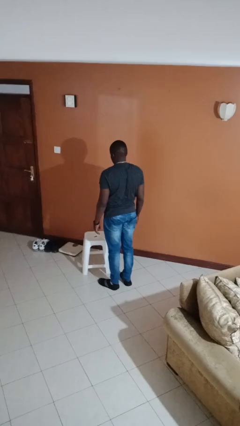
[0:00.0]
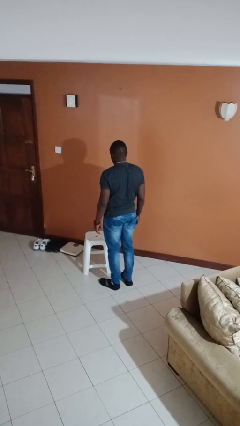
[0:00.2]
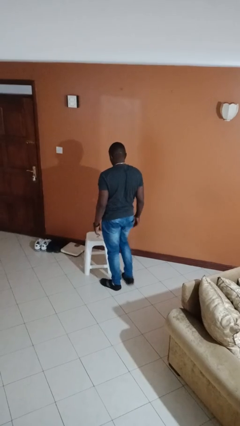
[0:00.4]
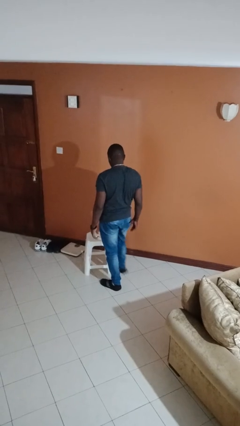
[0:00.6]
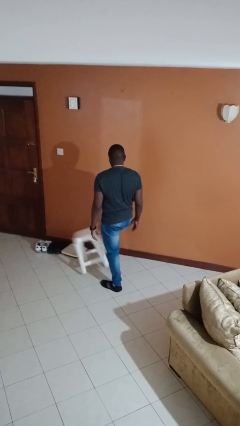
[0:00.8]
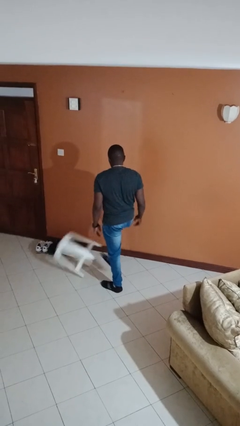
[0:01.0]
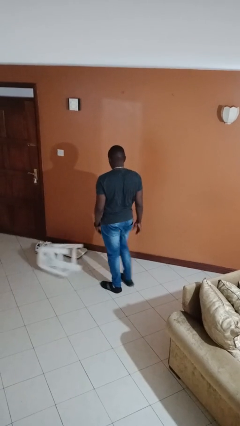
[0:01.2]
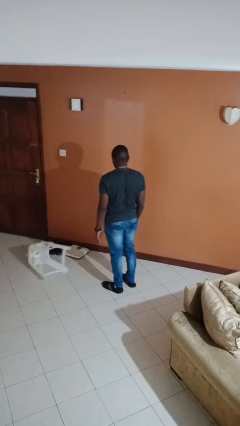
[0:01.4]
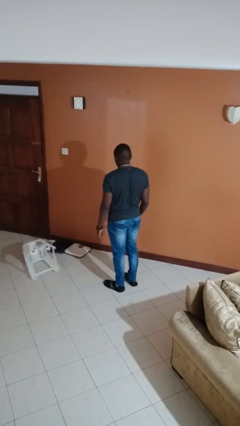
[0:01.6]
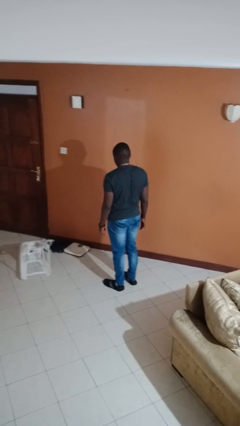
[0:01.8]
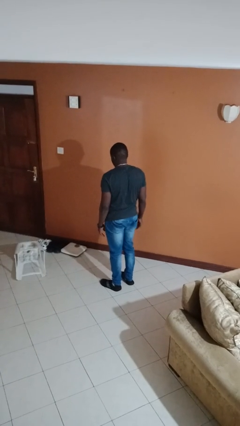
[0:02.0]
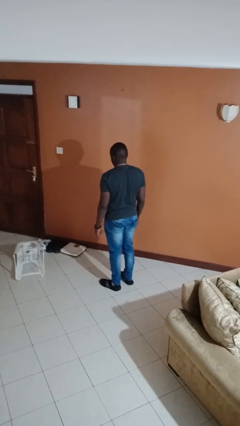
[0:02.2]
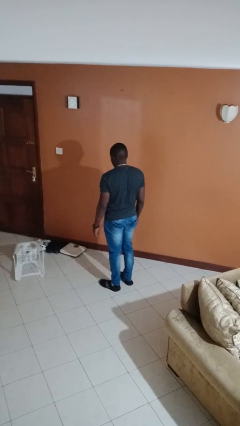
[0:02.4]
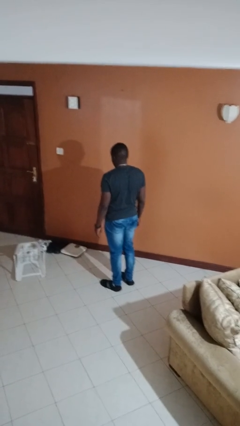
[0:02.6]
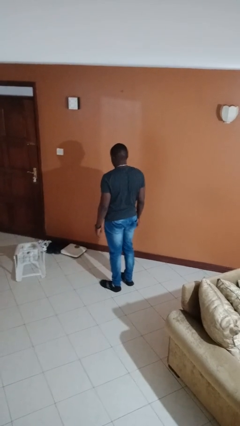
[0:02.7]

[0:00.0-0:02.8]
person knocks over furniture

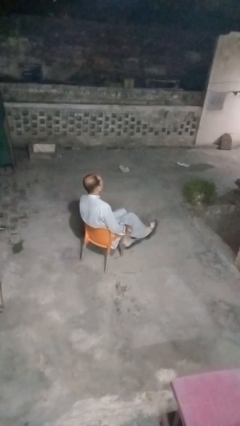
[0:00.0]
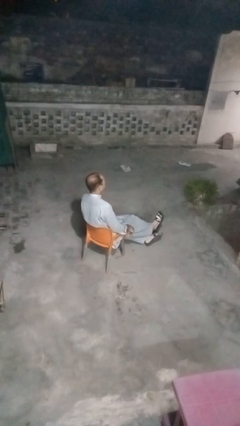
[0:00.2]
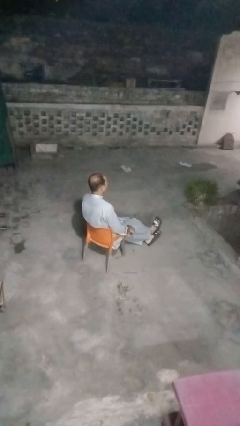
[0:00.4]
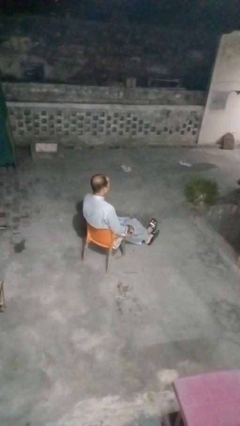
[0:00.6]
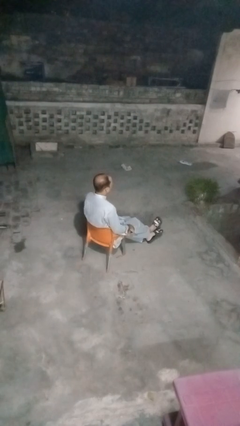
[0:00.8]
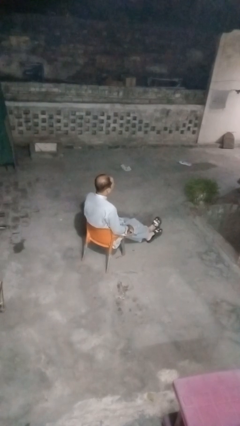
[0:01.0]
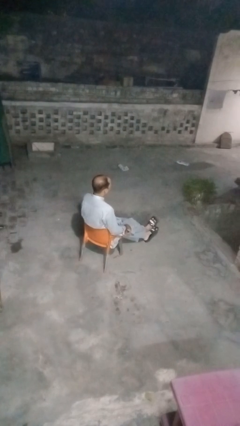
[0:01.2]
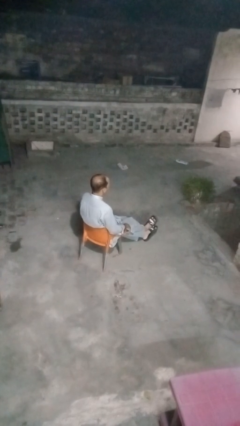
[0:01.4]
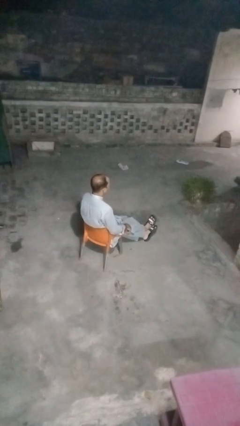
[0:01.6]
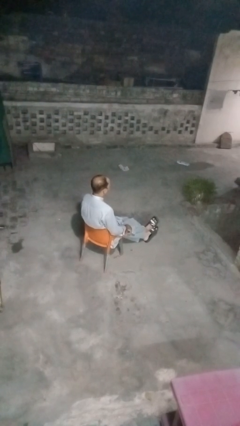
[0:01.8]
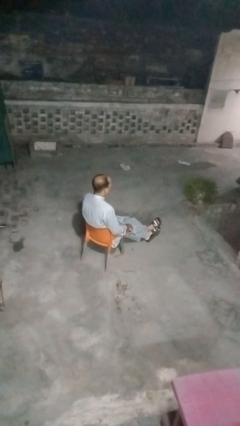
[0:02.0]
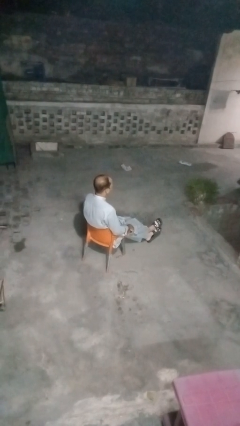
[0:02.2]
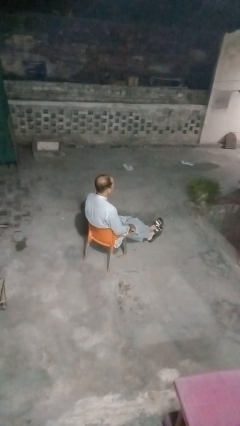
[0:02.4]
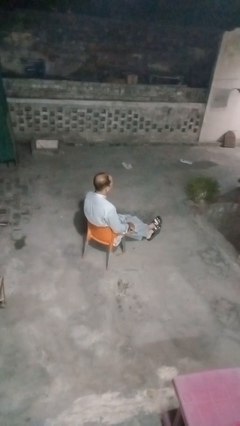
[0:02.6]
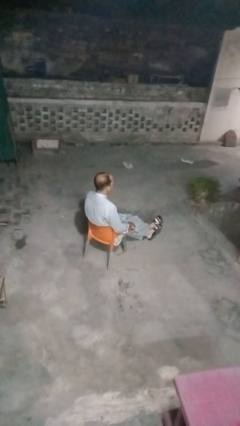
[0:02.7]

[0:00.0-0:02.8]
person crosses legs

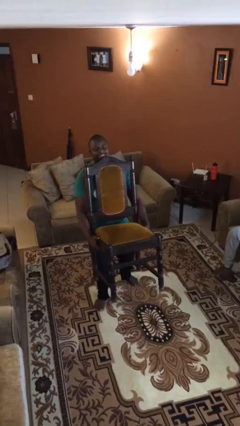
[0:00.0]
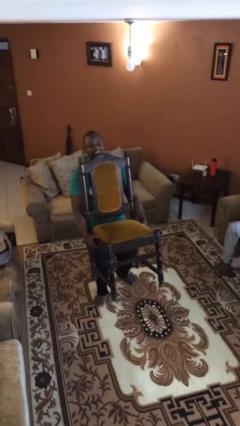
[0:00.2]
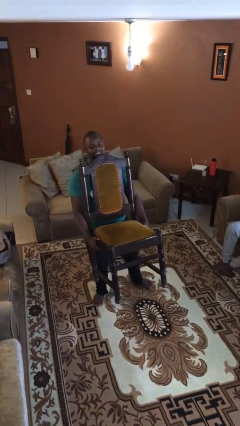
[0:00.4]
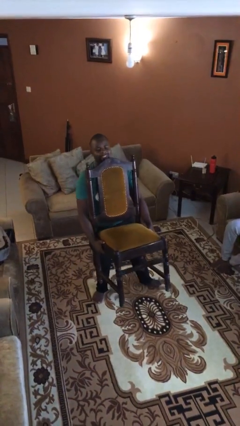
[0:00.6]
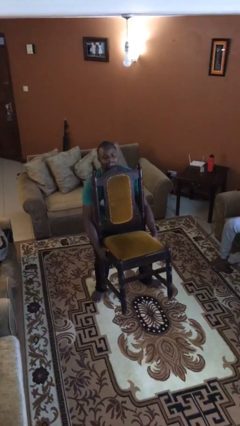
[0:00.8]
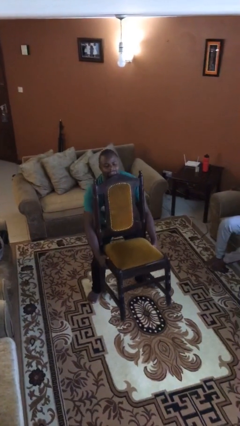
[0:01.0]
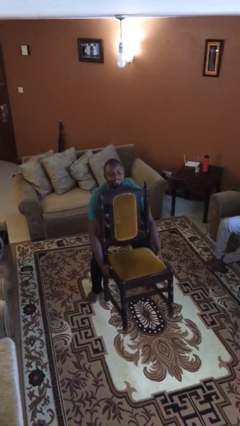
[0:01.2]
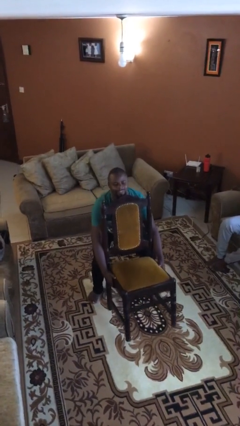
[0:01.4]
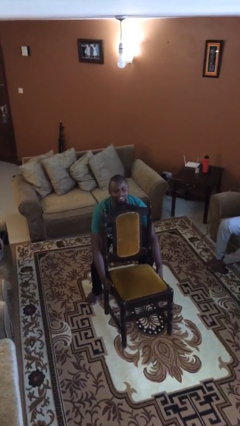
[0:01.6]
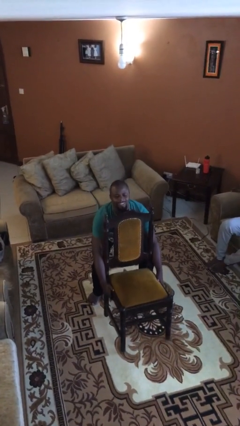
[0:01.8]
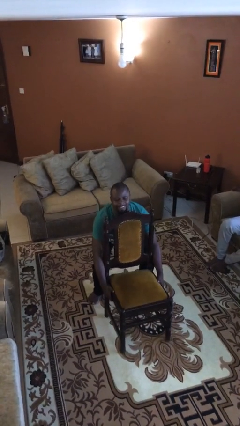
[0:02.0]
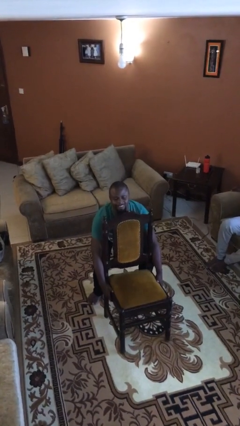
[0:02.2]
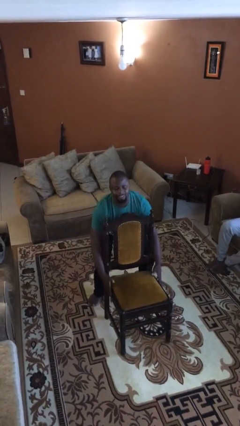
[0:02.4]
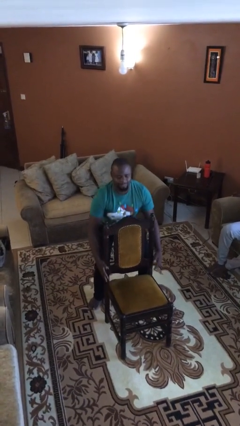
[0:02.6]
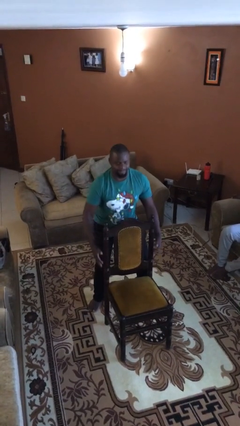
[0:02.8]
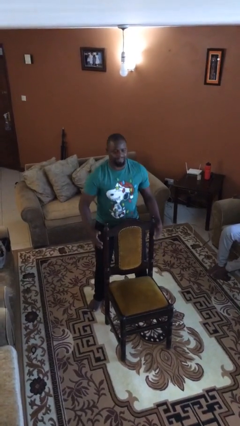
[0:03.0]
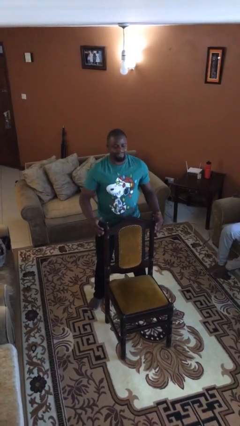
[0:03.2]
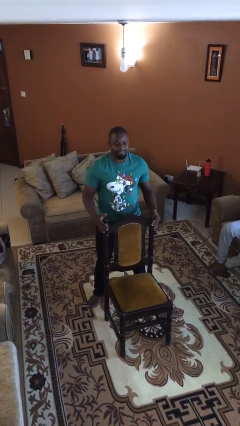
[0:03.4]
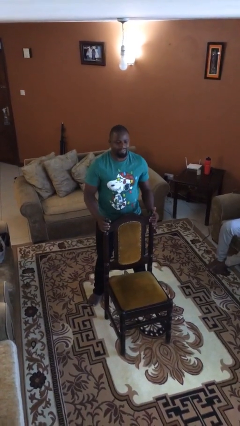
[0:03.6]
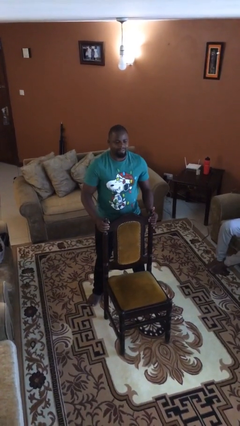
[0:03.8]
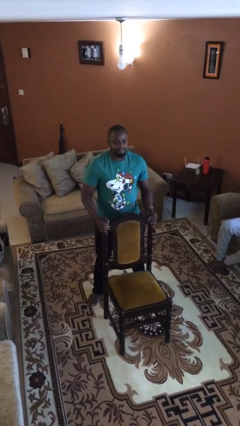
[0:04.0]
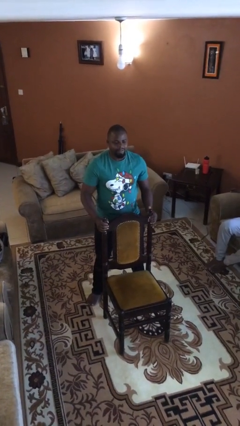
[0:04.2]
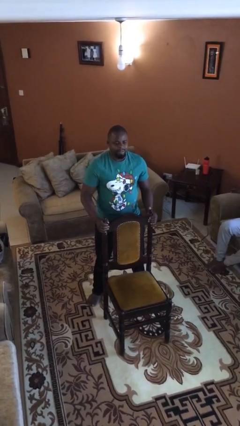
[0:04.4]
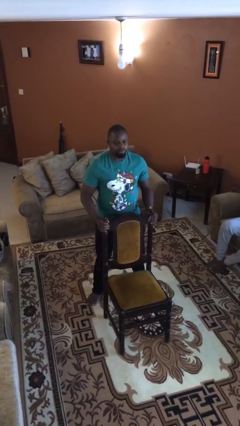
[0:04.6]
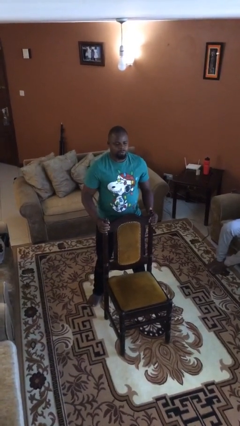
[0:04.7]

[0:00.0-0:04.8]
person puts down object on floor

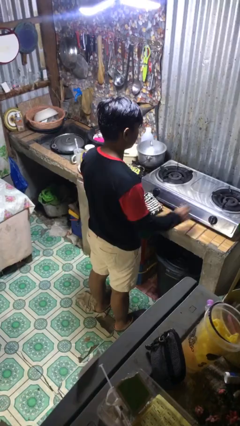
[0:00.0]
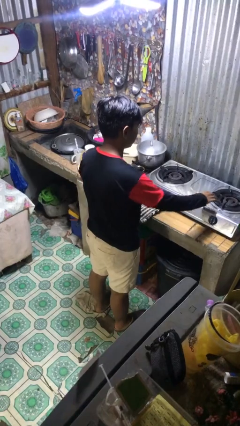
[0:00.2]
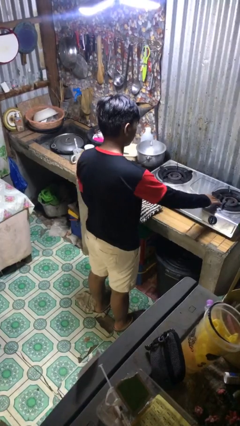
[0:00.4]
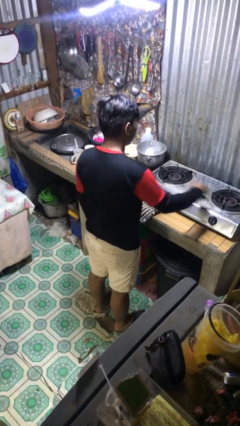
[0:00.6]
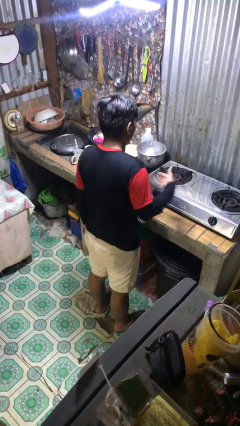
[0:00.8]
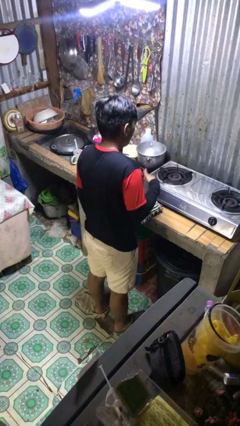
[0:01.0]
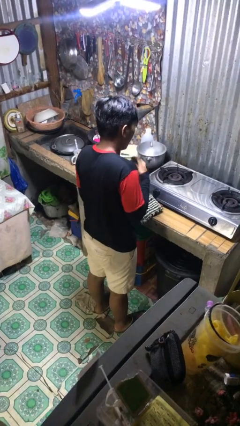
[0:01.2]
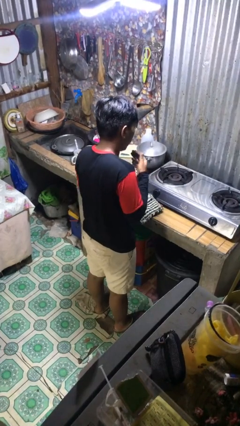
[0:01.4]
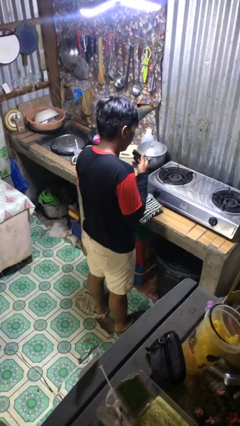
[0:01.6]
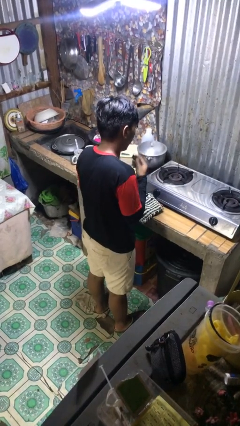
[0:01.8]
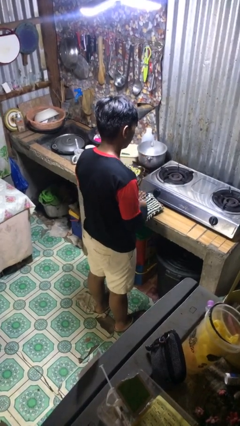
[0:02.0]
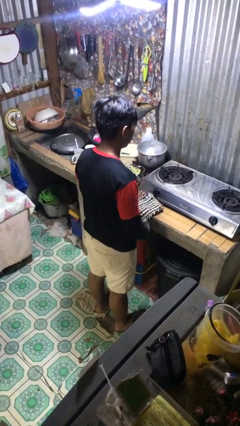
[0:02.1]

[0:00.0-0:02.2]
person burns hand

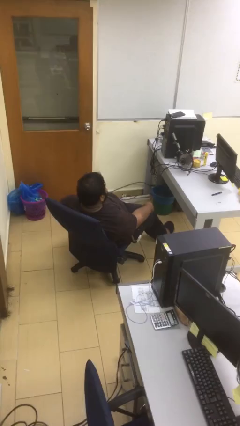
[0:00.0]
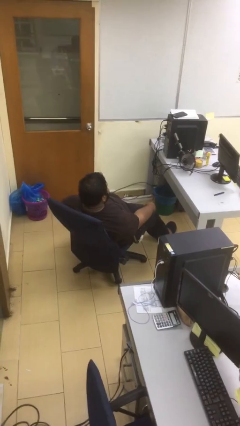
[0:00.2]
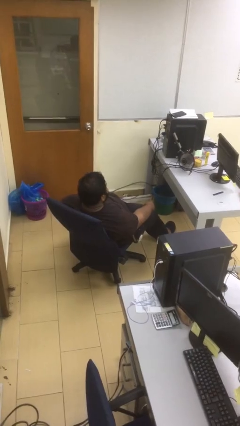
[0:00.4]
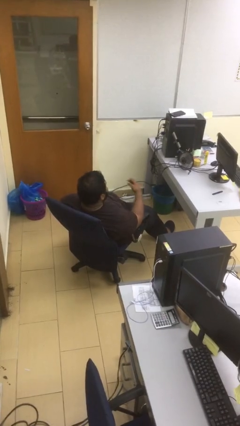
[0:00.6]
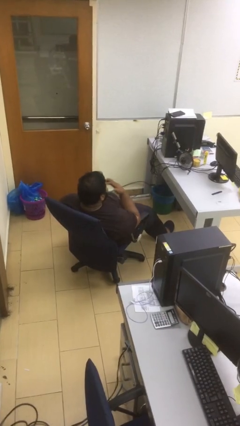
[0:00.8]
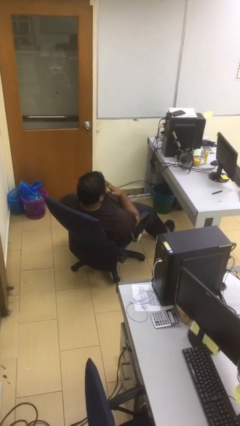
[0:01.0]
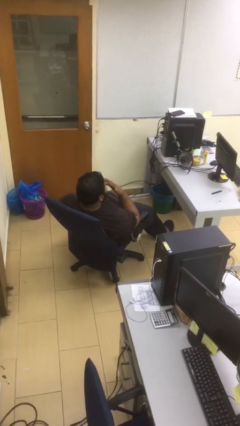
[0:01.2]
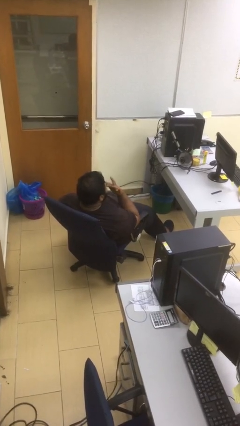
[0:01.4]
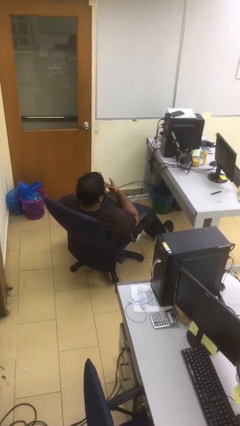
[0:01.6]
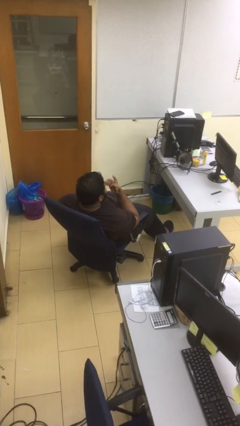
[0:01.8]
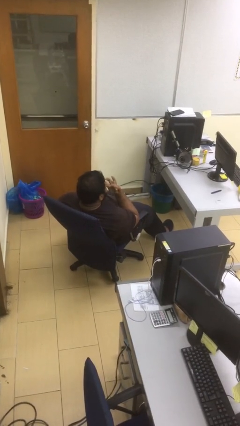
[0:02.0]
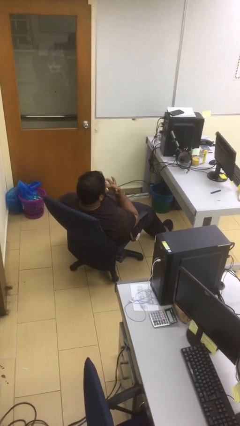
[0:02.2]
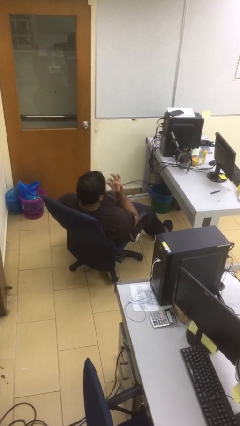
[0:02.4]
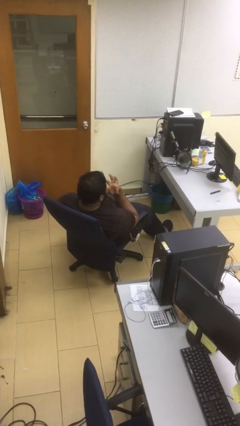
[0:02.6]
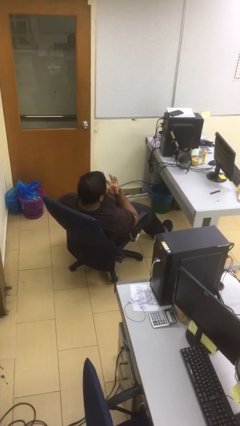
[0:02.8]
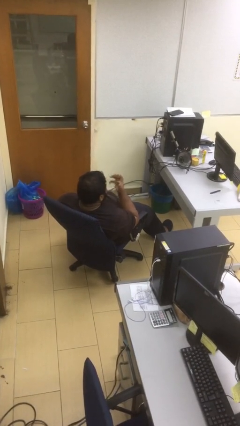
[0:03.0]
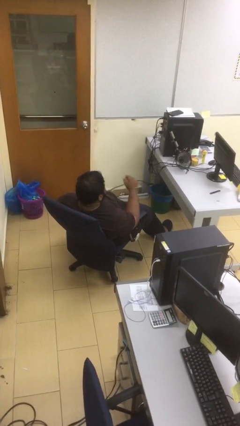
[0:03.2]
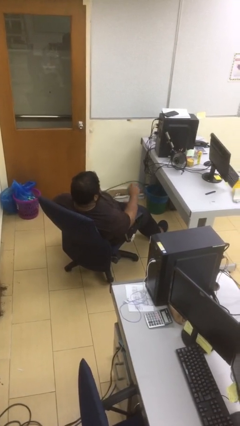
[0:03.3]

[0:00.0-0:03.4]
person licks fingers

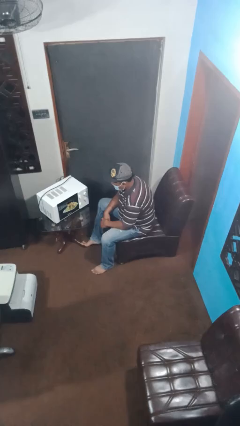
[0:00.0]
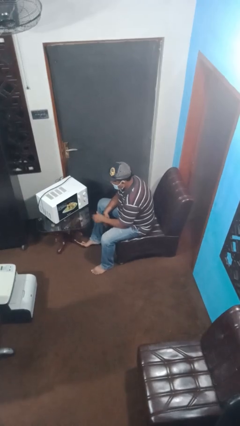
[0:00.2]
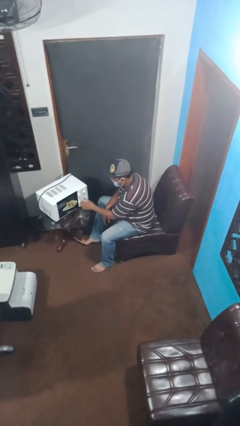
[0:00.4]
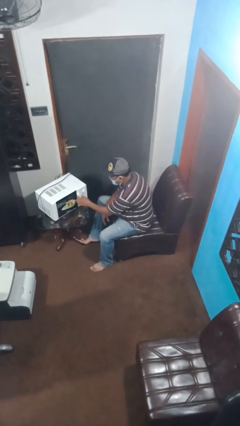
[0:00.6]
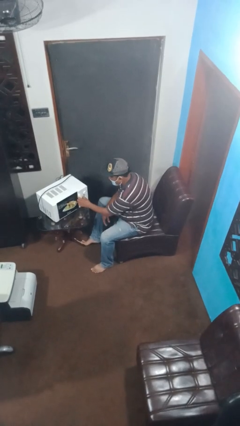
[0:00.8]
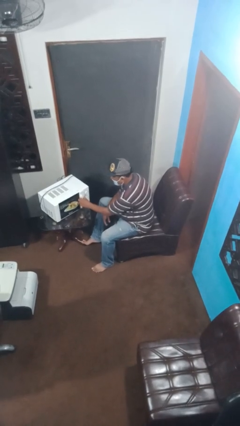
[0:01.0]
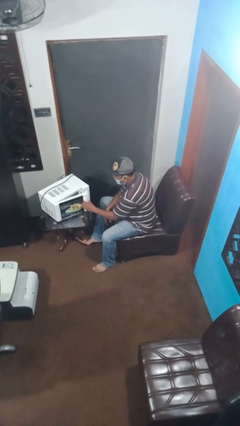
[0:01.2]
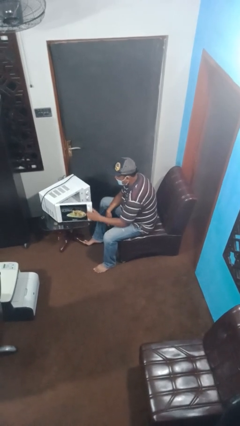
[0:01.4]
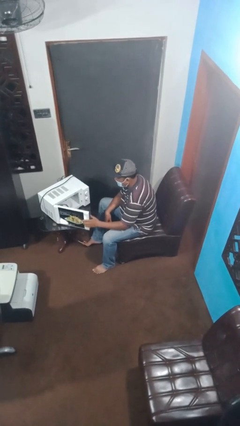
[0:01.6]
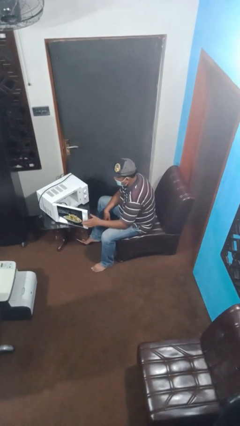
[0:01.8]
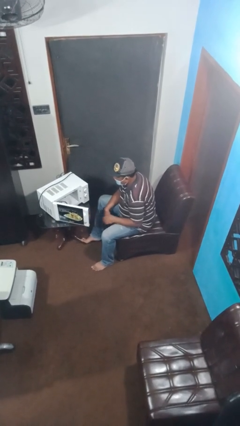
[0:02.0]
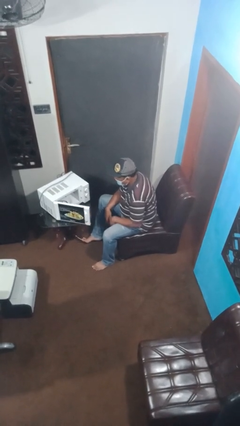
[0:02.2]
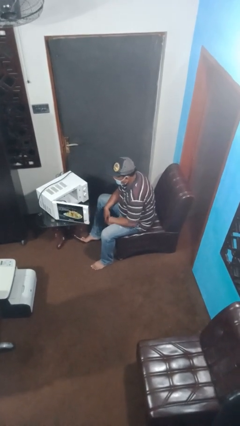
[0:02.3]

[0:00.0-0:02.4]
person opens microwave
